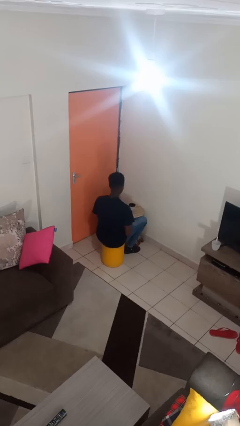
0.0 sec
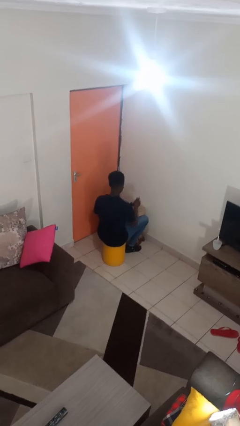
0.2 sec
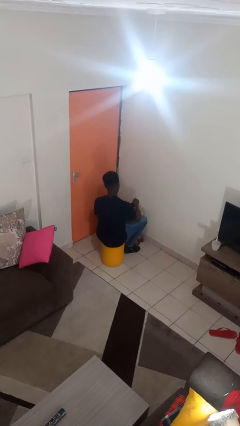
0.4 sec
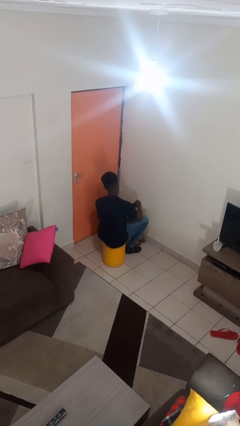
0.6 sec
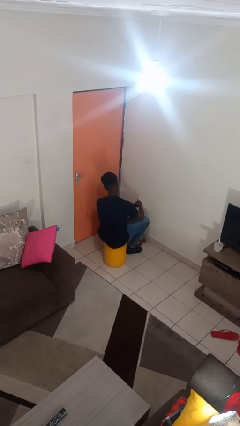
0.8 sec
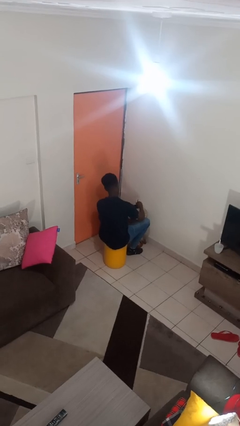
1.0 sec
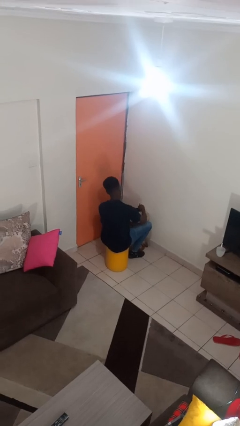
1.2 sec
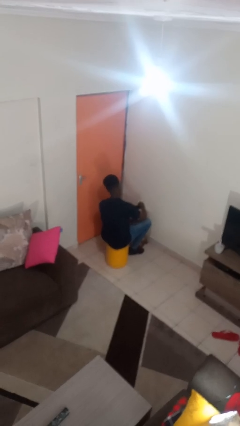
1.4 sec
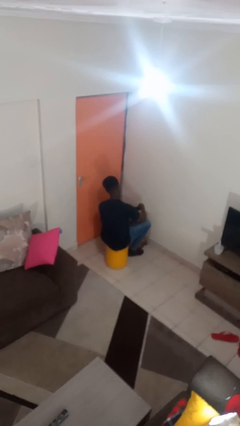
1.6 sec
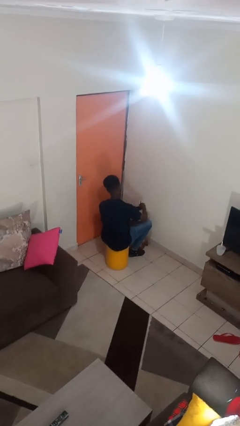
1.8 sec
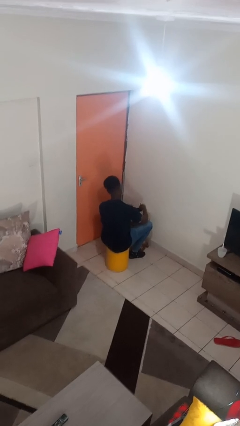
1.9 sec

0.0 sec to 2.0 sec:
person stirs mug

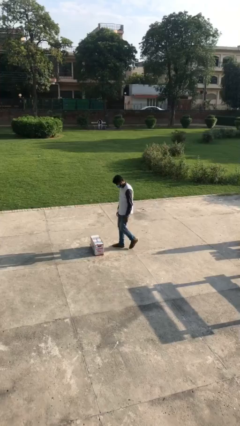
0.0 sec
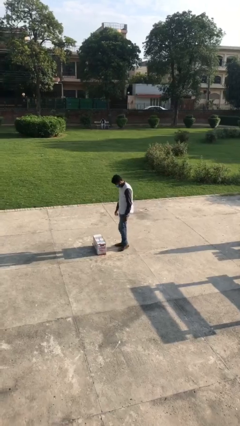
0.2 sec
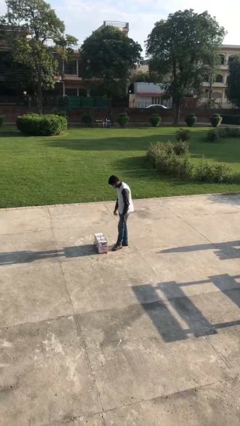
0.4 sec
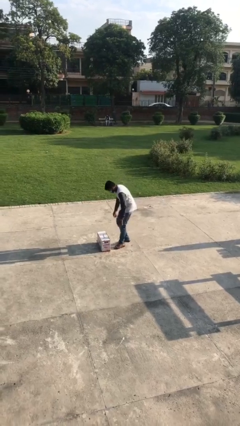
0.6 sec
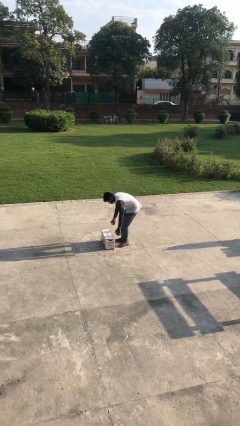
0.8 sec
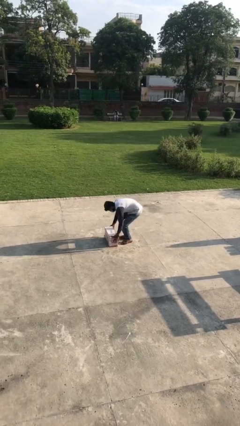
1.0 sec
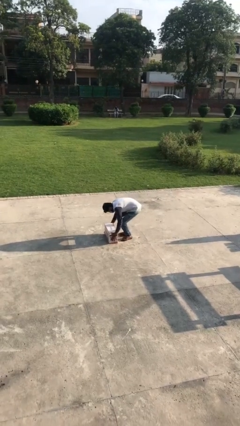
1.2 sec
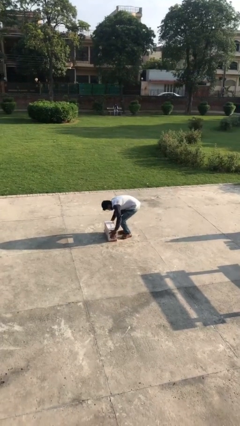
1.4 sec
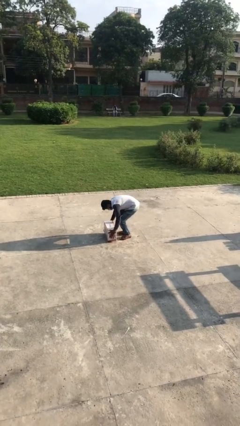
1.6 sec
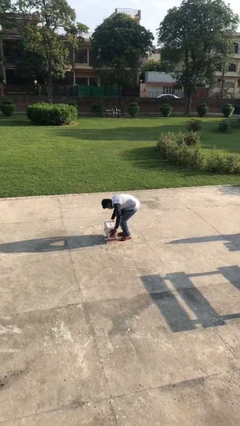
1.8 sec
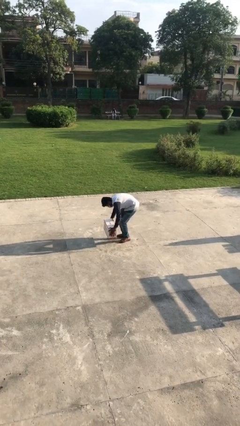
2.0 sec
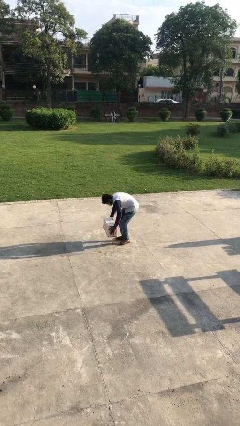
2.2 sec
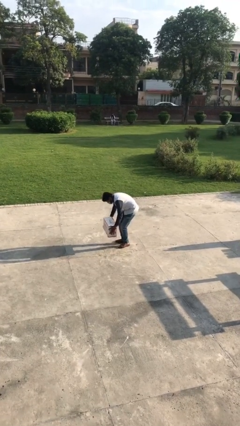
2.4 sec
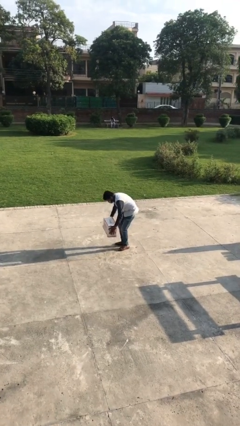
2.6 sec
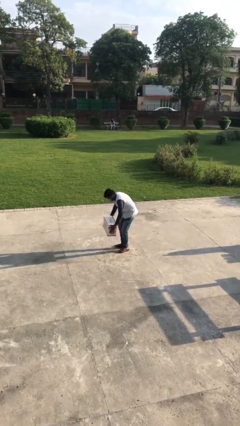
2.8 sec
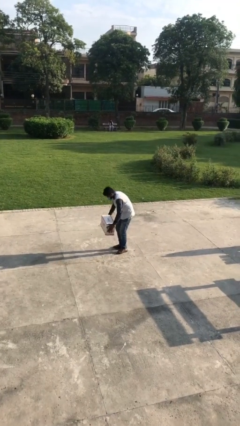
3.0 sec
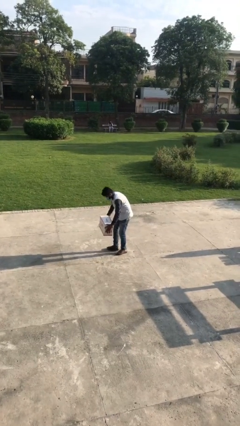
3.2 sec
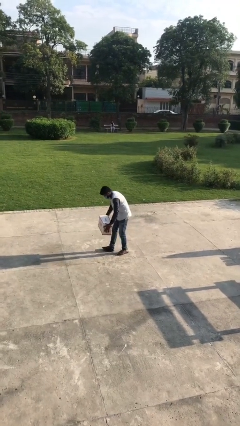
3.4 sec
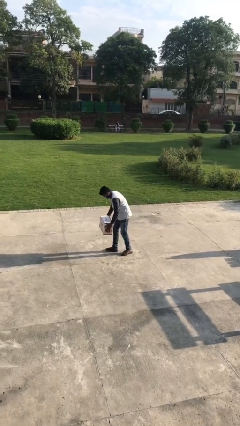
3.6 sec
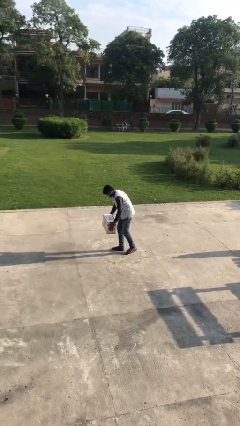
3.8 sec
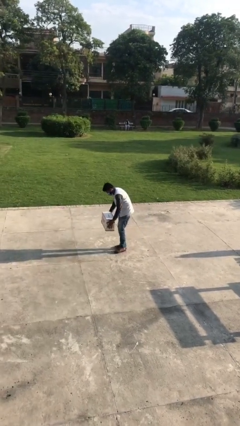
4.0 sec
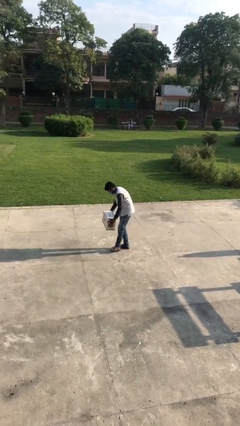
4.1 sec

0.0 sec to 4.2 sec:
person picks up object from floor

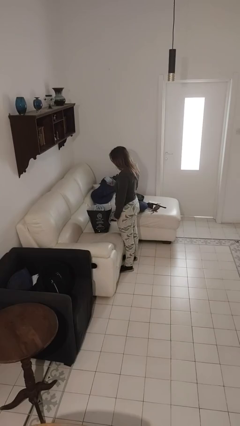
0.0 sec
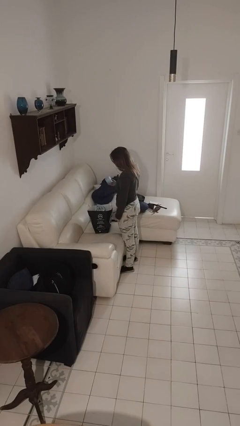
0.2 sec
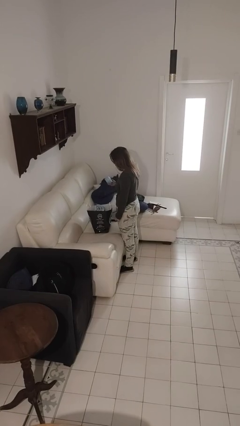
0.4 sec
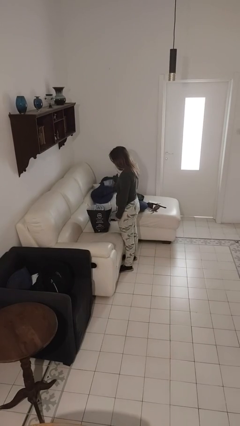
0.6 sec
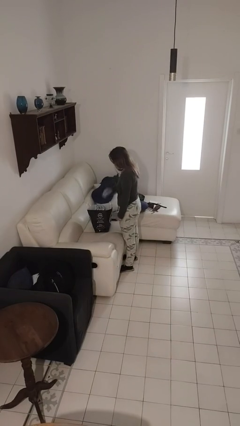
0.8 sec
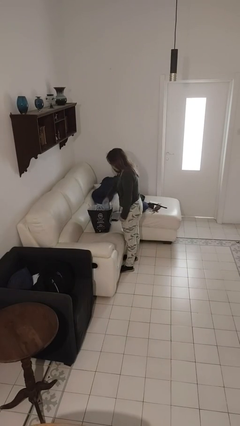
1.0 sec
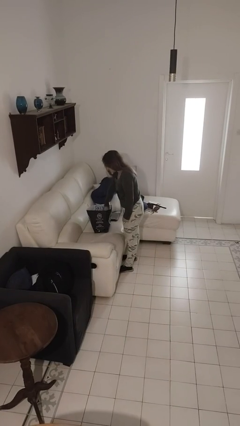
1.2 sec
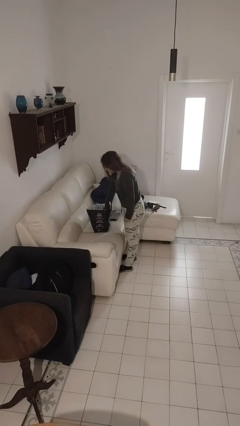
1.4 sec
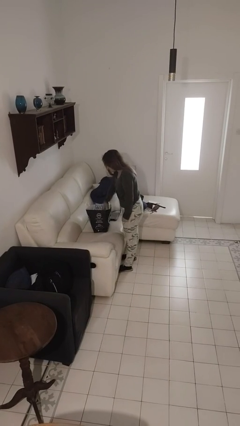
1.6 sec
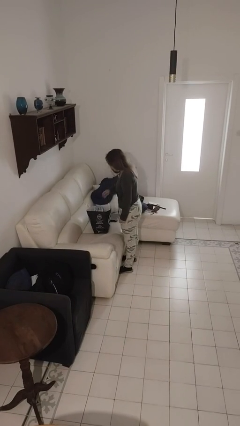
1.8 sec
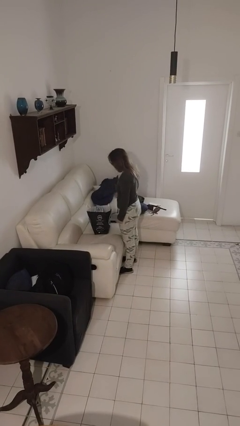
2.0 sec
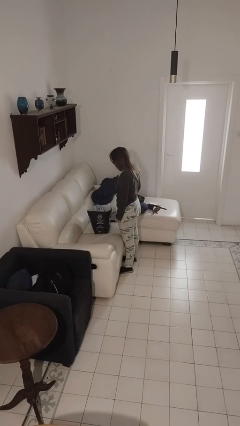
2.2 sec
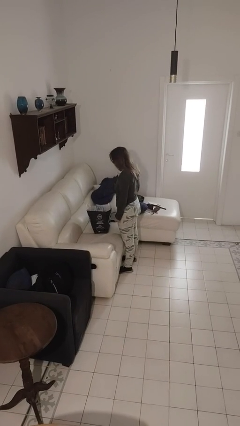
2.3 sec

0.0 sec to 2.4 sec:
person puts object into bag

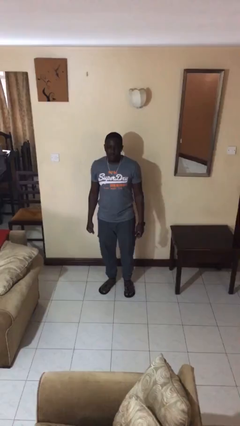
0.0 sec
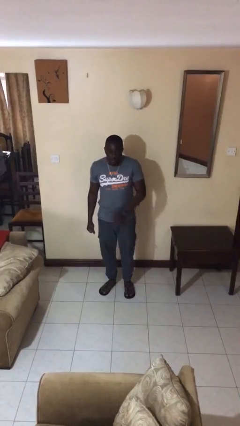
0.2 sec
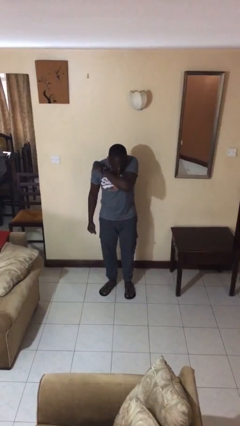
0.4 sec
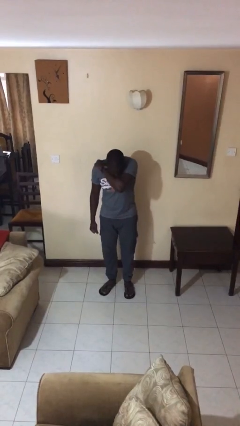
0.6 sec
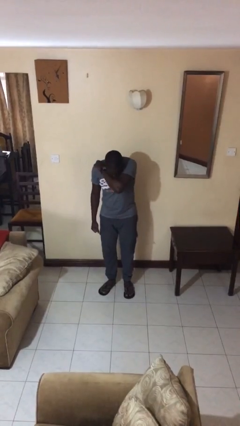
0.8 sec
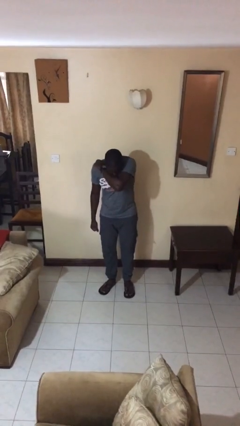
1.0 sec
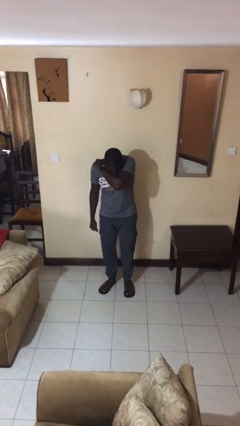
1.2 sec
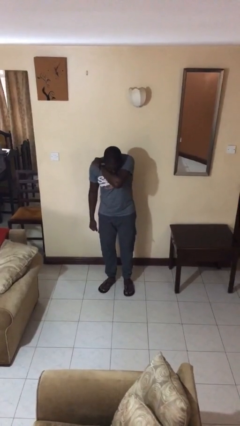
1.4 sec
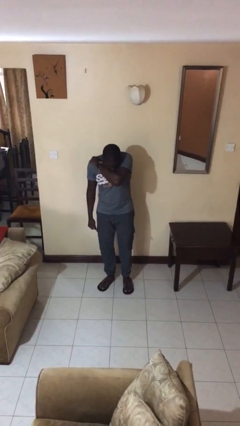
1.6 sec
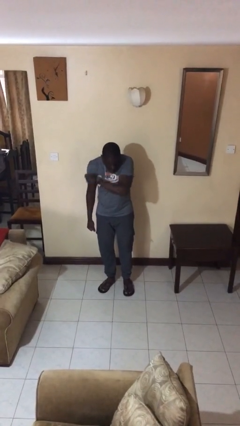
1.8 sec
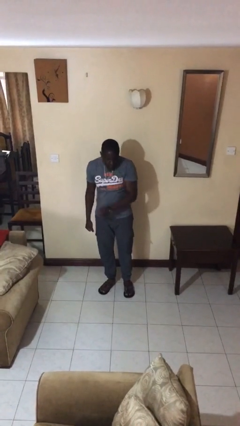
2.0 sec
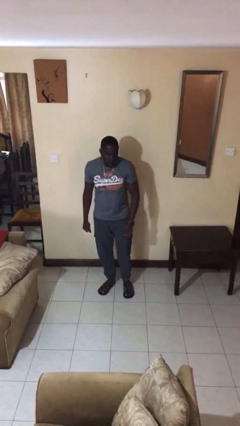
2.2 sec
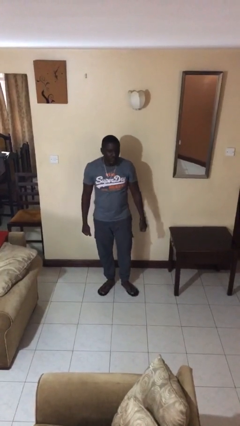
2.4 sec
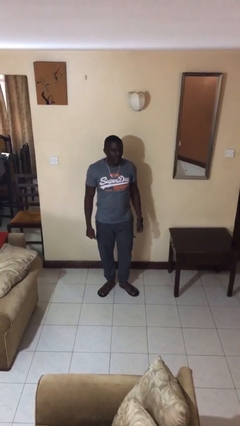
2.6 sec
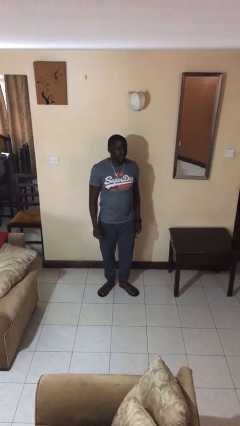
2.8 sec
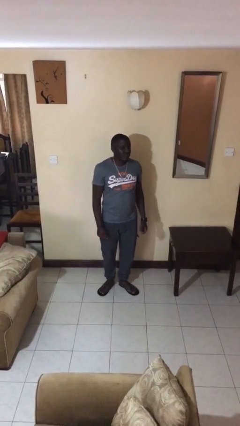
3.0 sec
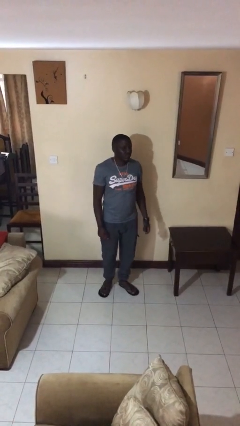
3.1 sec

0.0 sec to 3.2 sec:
person sneezes into arm

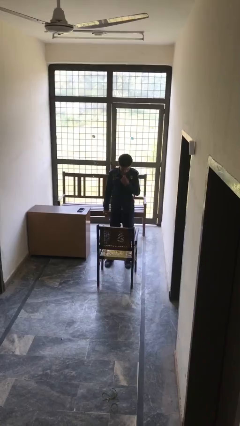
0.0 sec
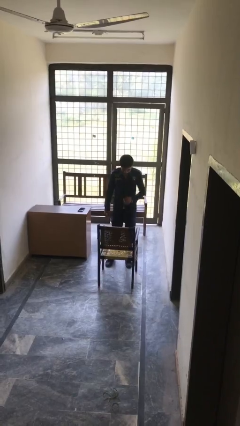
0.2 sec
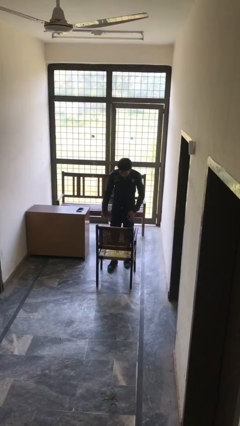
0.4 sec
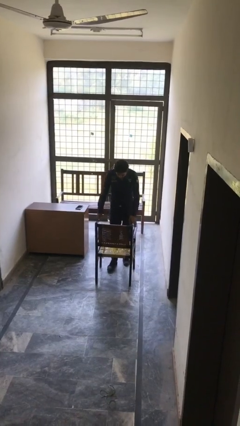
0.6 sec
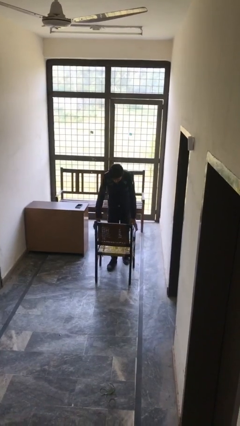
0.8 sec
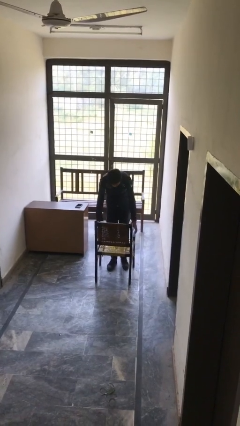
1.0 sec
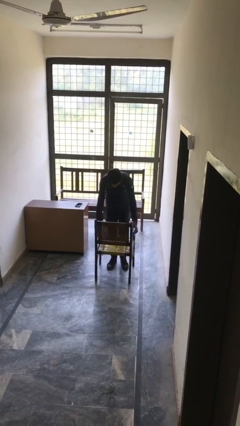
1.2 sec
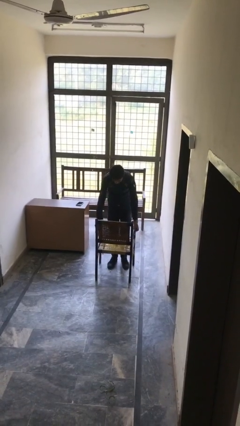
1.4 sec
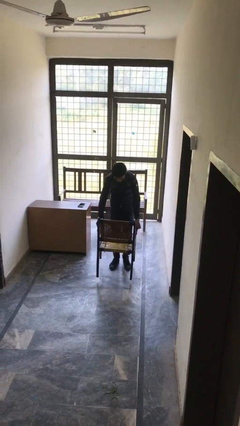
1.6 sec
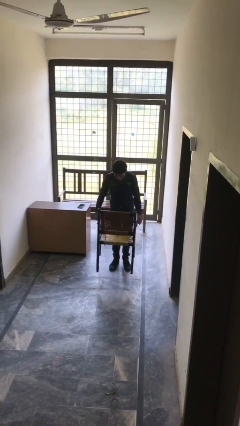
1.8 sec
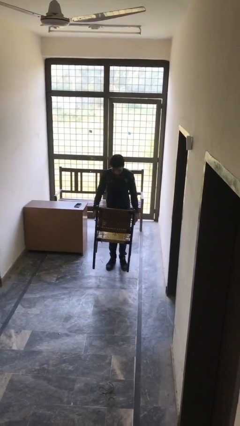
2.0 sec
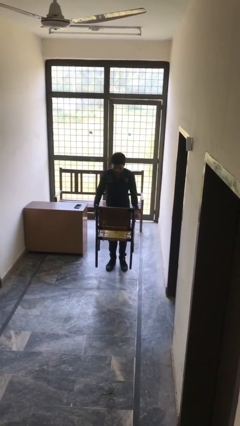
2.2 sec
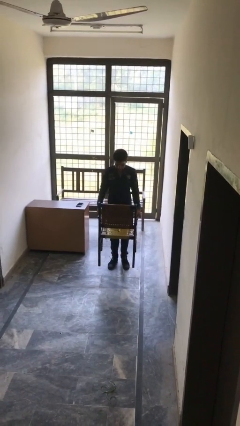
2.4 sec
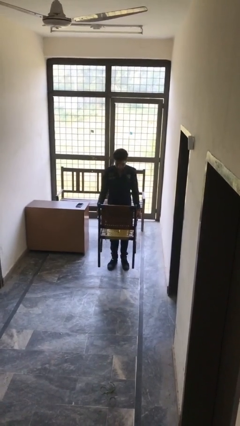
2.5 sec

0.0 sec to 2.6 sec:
person picks up object from table

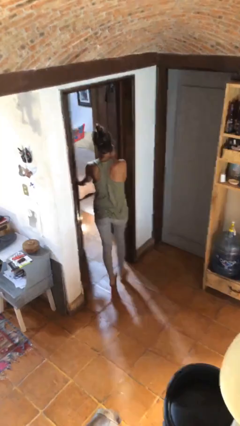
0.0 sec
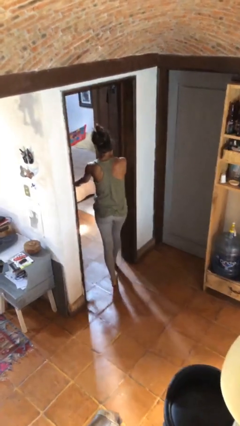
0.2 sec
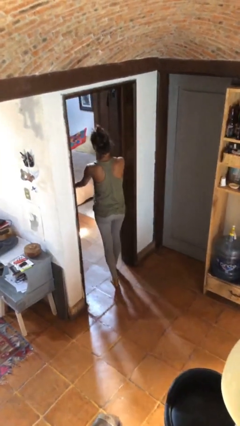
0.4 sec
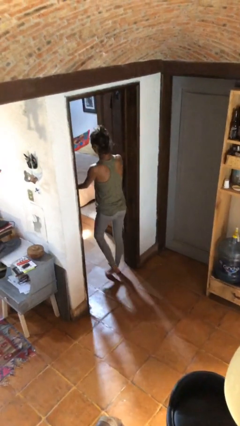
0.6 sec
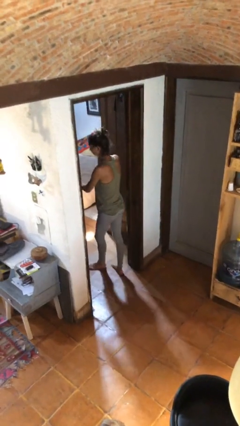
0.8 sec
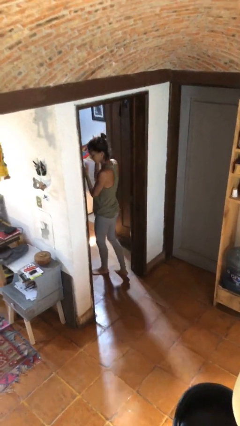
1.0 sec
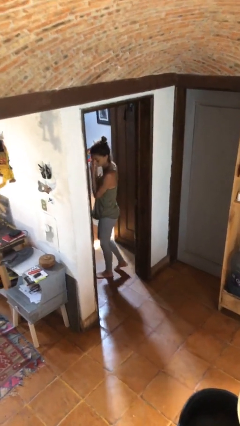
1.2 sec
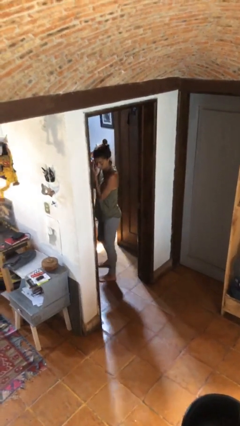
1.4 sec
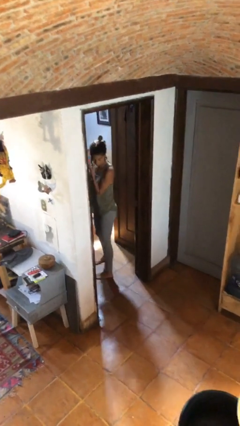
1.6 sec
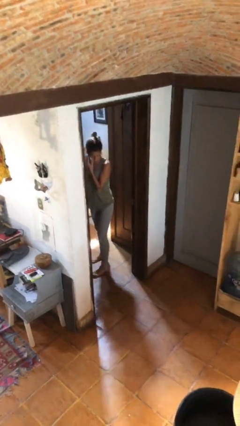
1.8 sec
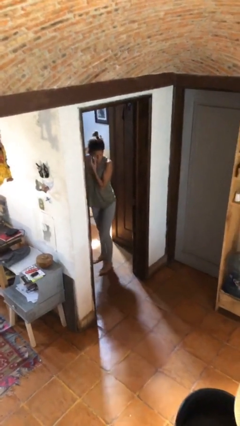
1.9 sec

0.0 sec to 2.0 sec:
person exits scene through structure

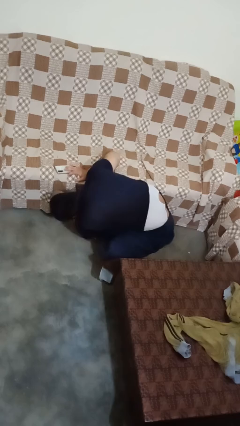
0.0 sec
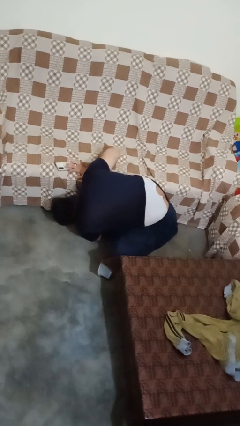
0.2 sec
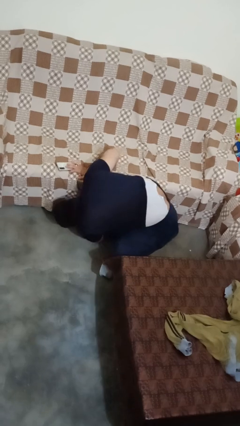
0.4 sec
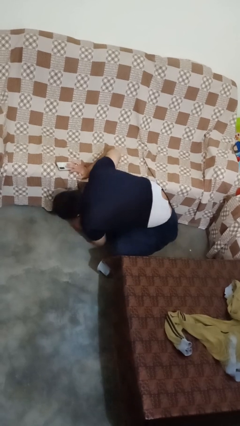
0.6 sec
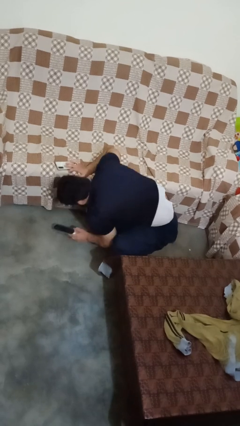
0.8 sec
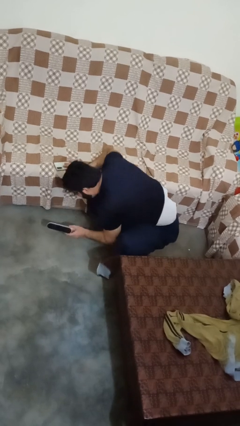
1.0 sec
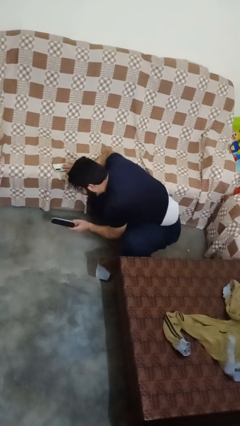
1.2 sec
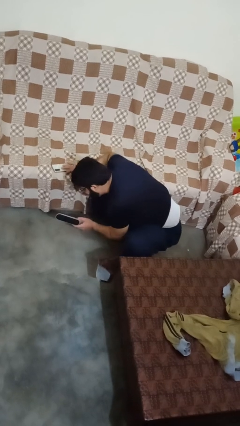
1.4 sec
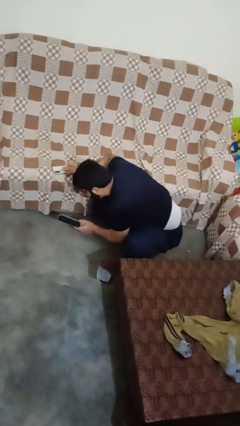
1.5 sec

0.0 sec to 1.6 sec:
person searches under couch
